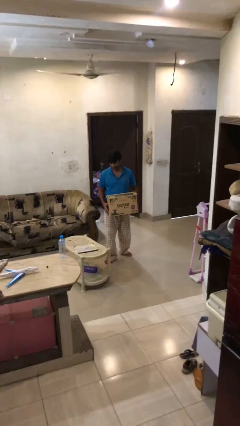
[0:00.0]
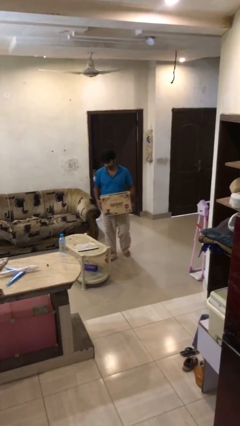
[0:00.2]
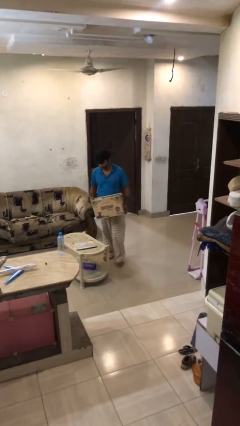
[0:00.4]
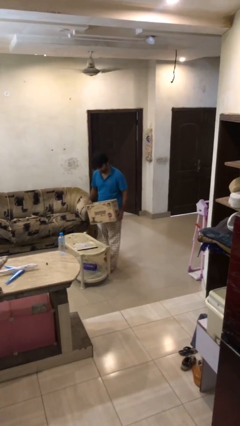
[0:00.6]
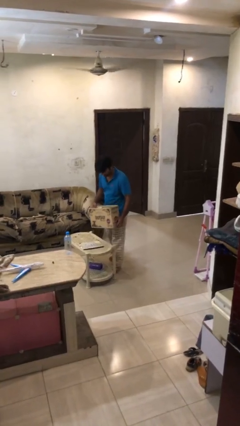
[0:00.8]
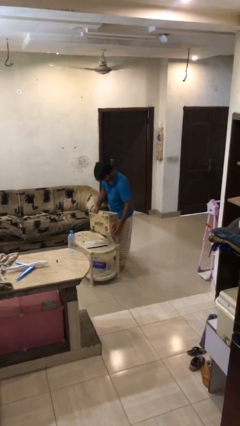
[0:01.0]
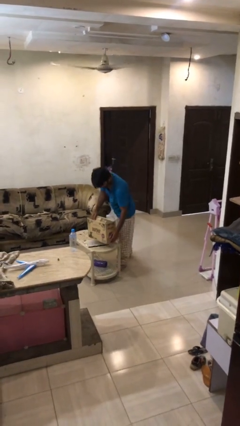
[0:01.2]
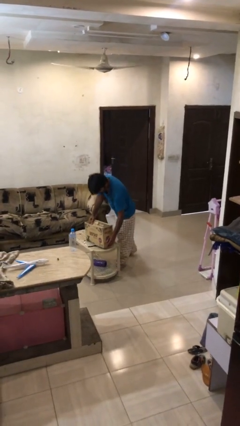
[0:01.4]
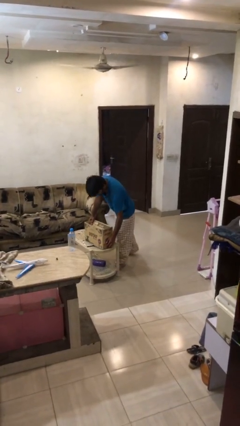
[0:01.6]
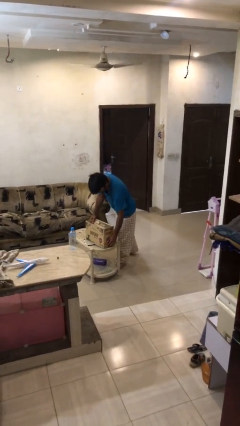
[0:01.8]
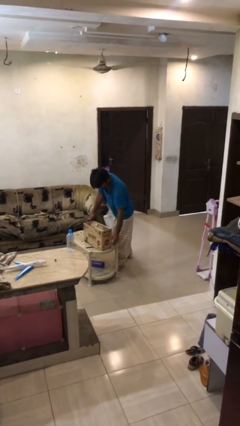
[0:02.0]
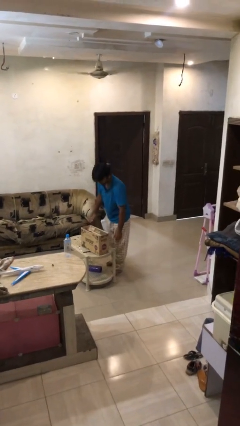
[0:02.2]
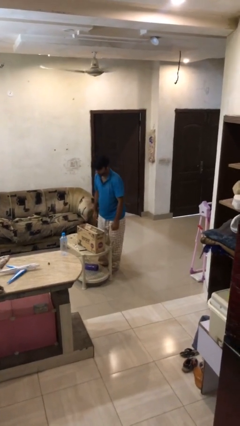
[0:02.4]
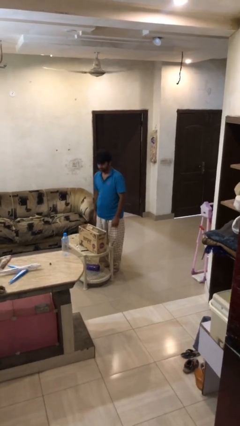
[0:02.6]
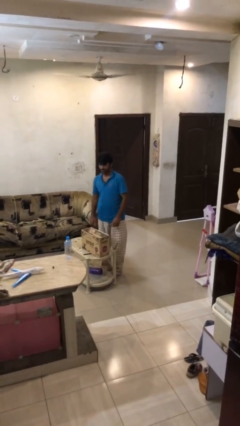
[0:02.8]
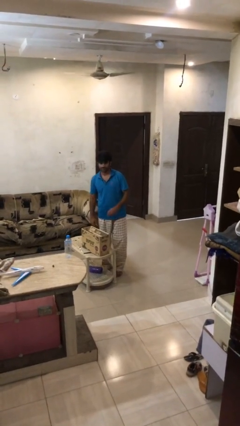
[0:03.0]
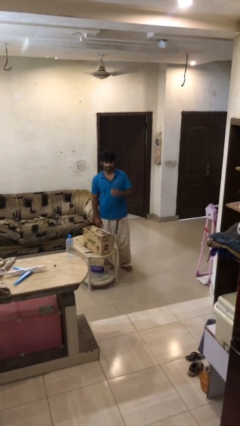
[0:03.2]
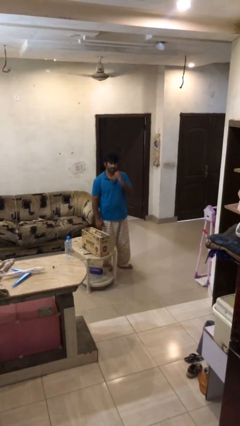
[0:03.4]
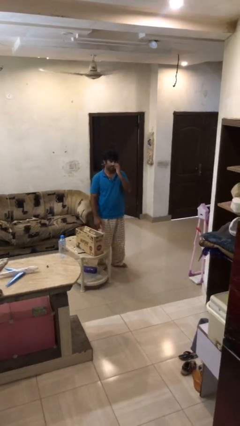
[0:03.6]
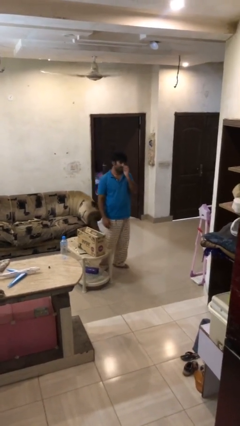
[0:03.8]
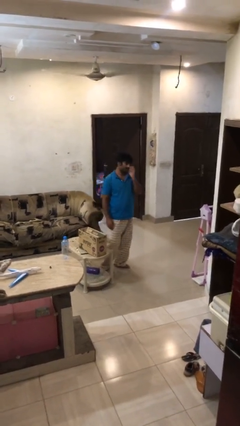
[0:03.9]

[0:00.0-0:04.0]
person puts down object on table

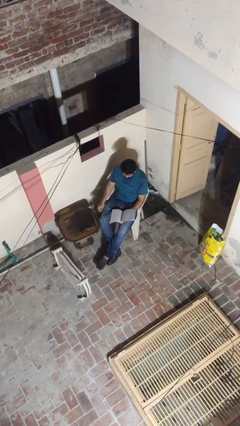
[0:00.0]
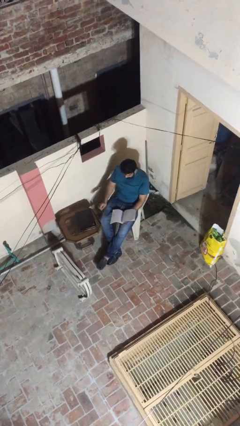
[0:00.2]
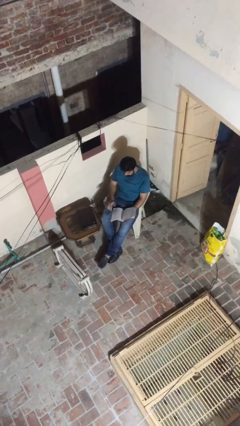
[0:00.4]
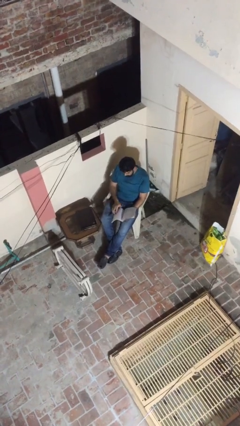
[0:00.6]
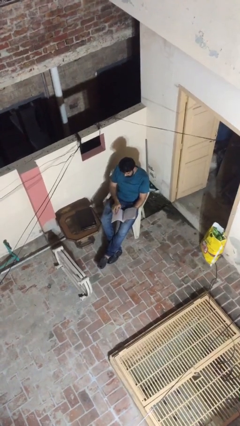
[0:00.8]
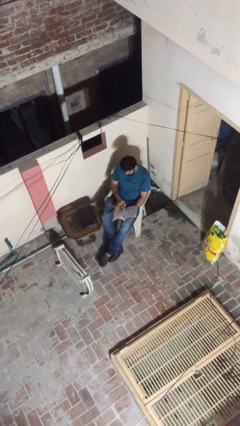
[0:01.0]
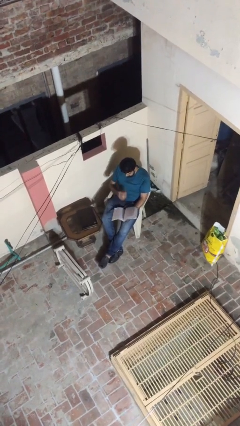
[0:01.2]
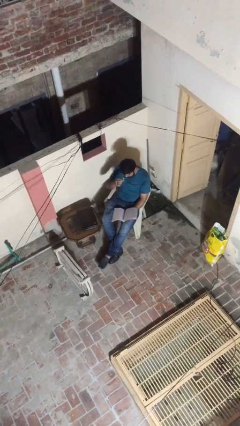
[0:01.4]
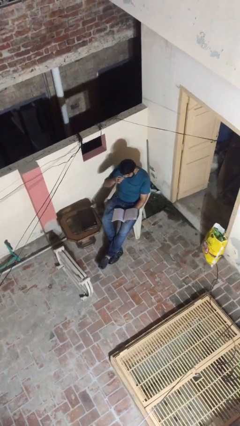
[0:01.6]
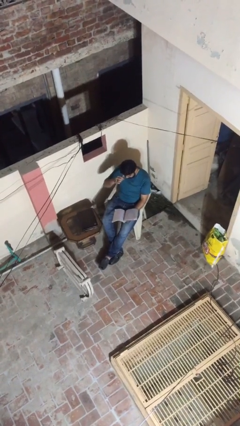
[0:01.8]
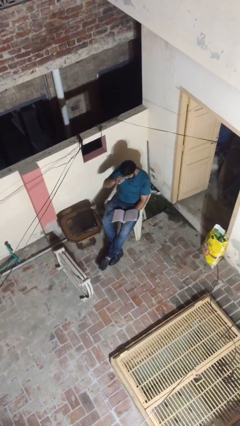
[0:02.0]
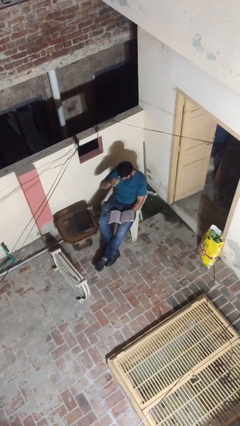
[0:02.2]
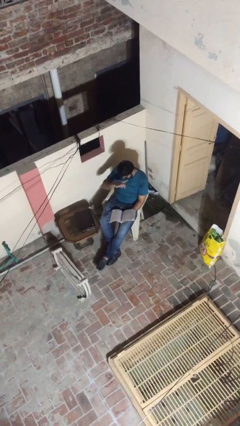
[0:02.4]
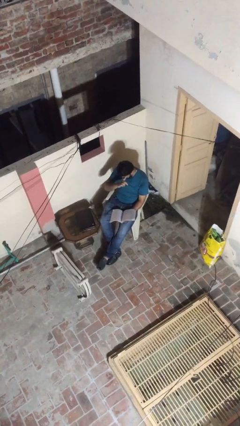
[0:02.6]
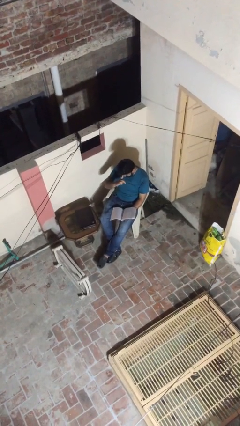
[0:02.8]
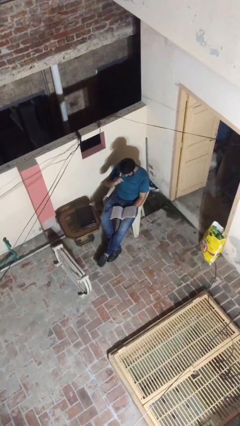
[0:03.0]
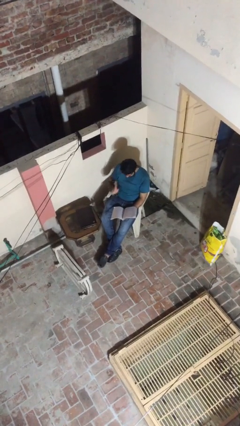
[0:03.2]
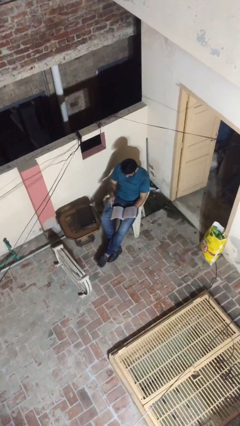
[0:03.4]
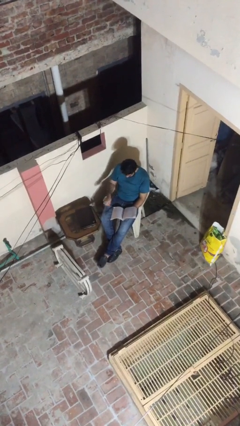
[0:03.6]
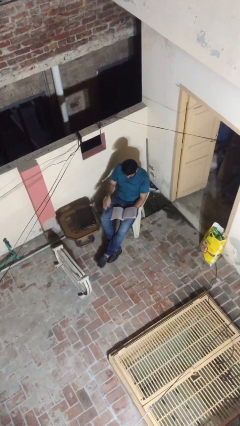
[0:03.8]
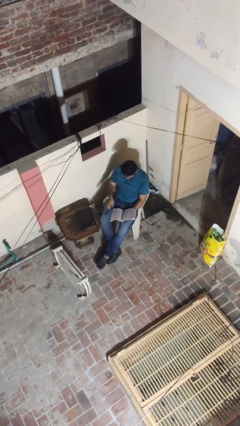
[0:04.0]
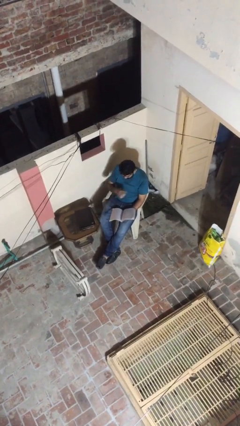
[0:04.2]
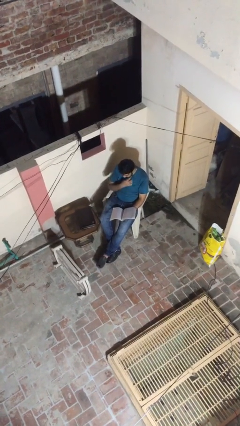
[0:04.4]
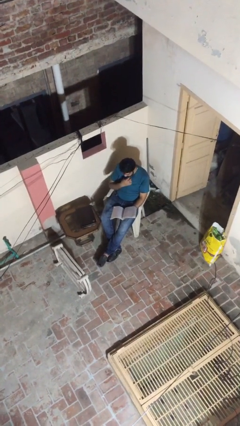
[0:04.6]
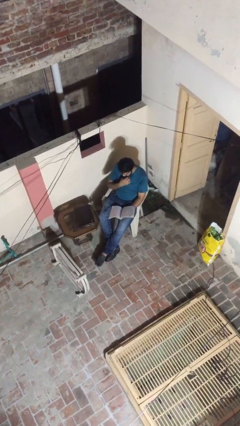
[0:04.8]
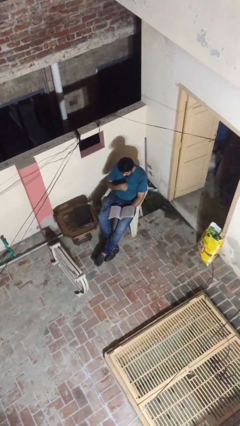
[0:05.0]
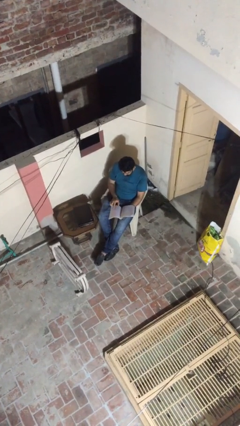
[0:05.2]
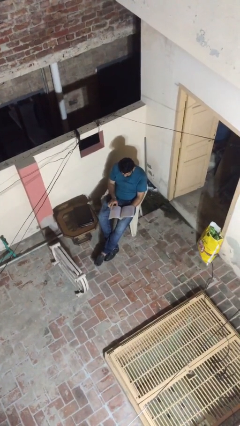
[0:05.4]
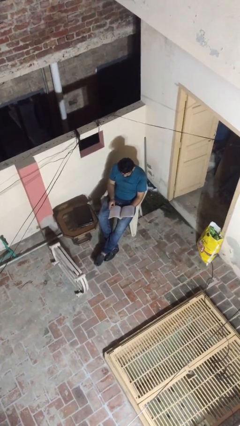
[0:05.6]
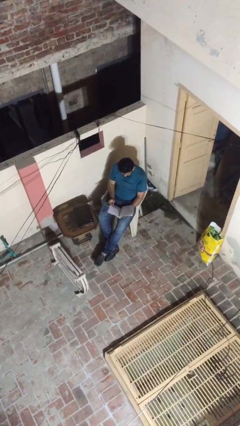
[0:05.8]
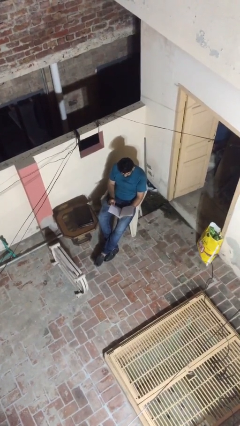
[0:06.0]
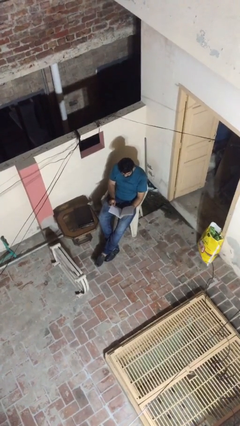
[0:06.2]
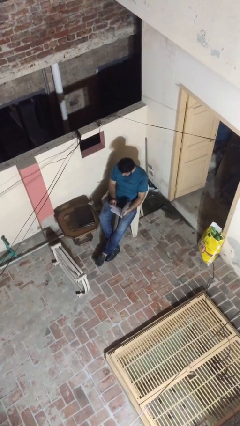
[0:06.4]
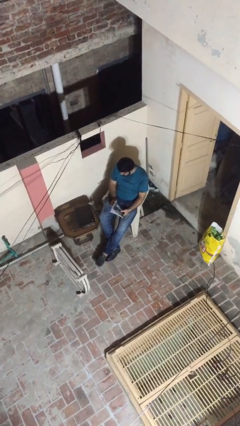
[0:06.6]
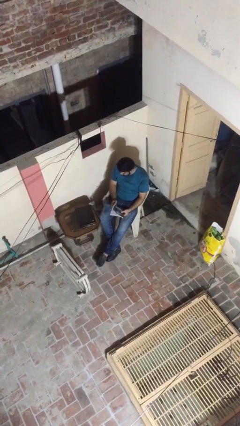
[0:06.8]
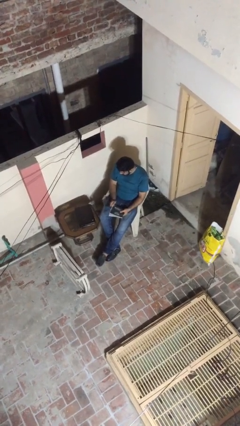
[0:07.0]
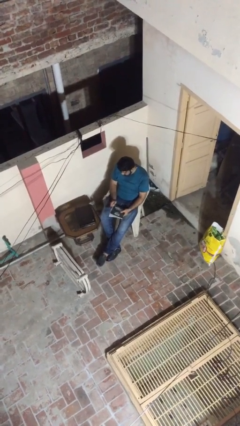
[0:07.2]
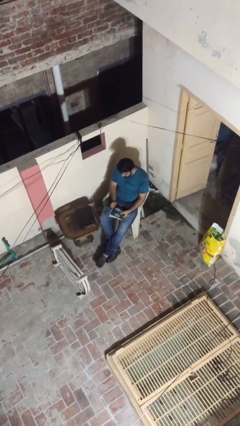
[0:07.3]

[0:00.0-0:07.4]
person reads document

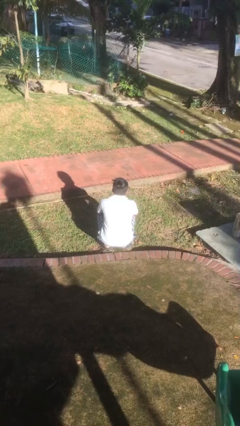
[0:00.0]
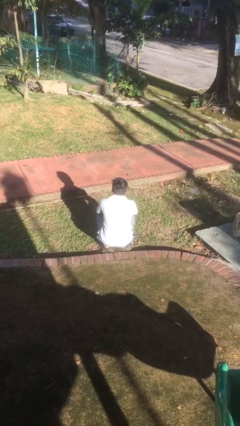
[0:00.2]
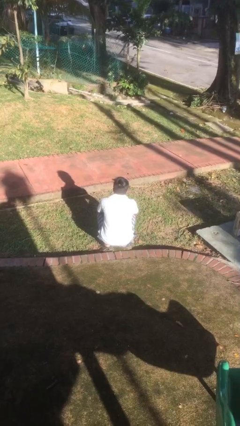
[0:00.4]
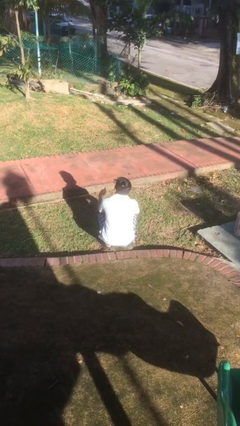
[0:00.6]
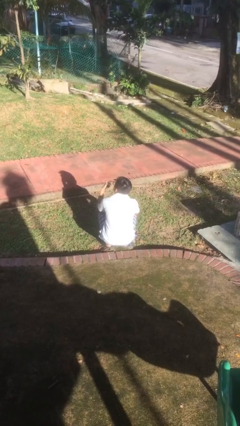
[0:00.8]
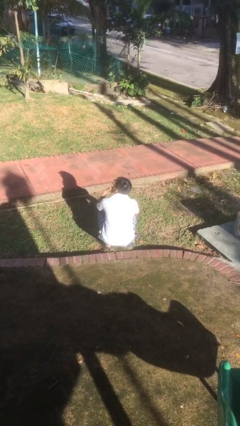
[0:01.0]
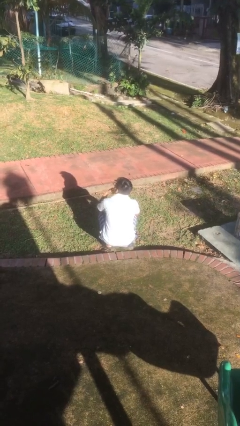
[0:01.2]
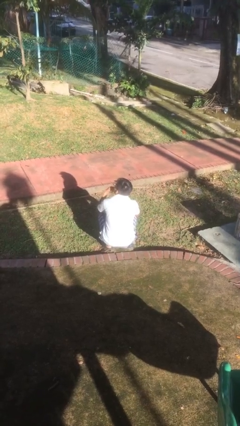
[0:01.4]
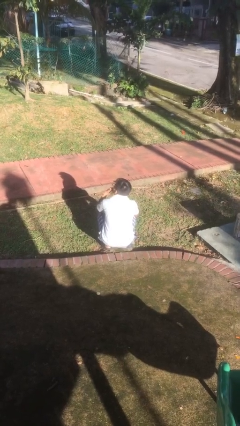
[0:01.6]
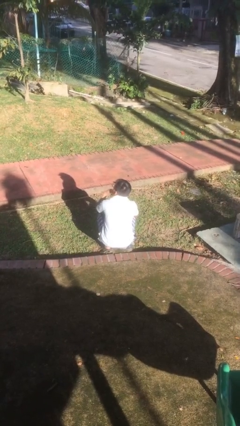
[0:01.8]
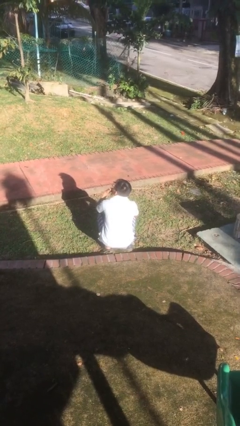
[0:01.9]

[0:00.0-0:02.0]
person strokes chin

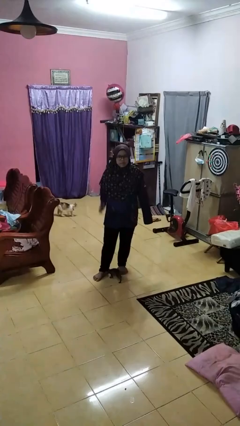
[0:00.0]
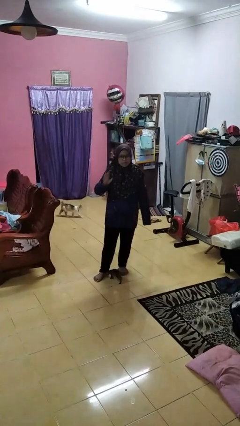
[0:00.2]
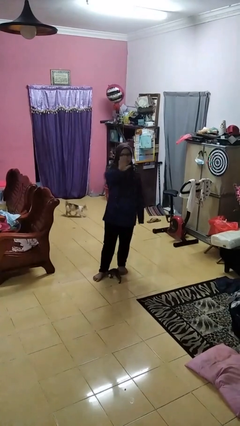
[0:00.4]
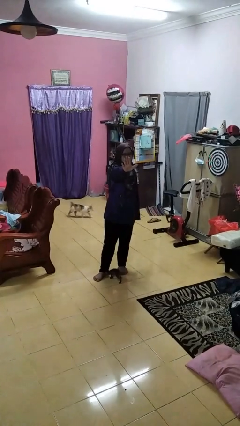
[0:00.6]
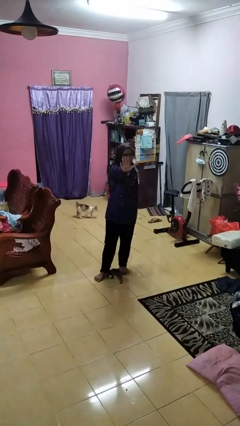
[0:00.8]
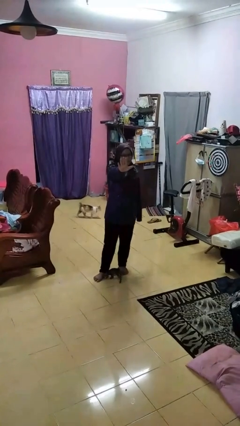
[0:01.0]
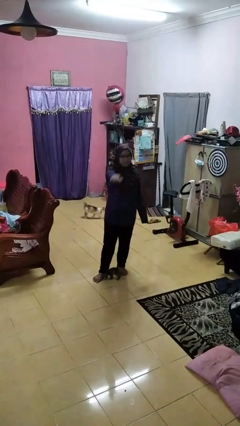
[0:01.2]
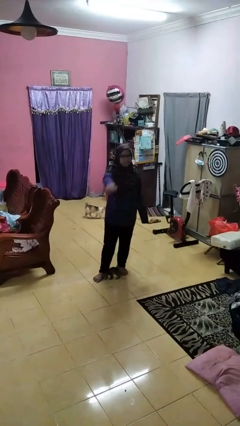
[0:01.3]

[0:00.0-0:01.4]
person gestures stop

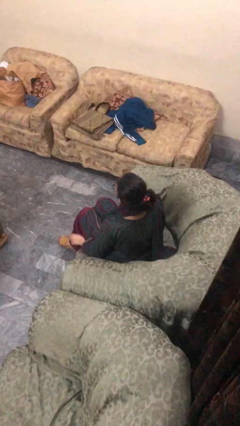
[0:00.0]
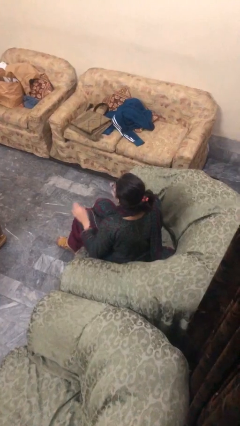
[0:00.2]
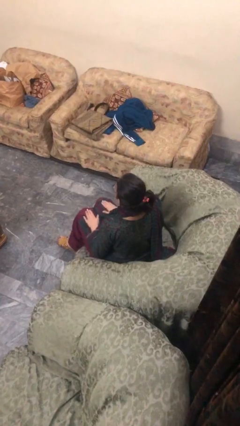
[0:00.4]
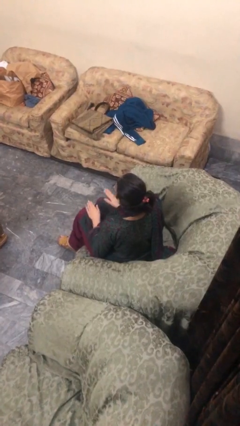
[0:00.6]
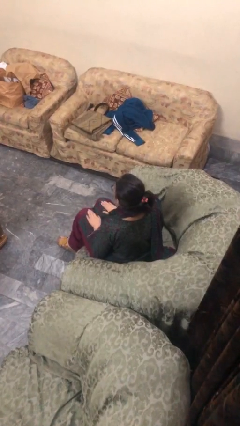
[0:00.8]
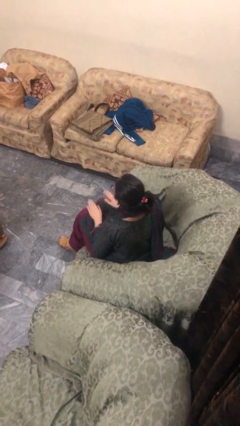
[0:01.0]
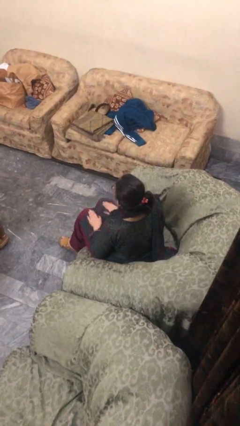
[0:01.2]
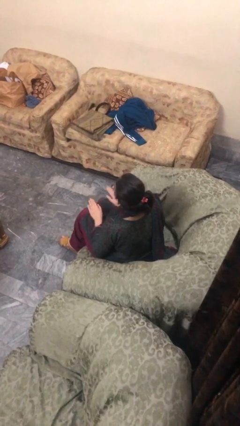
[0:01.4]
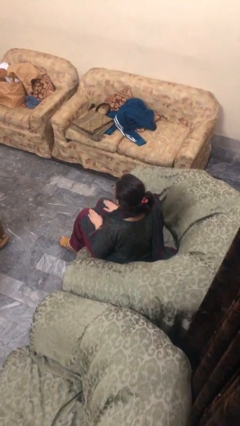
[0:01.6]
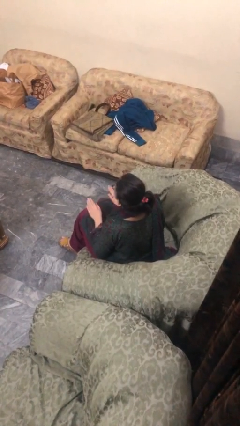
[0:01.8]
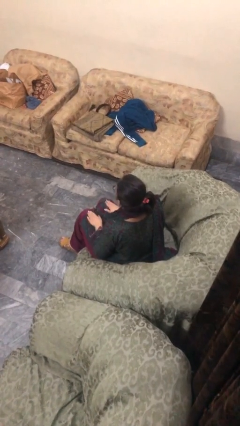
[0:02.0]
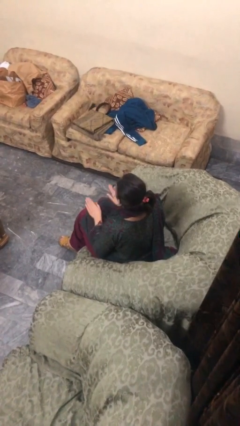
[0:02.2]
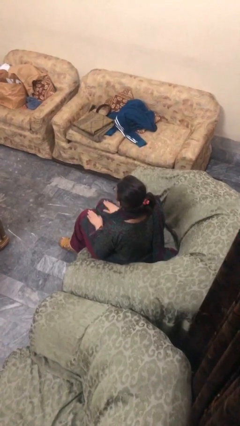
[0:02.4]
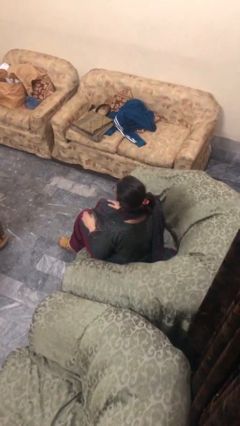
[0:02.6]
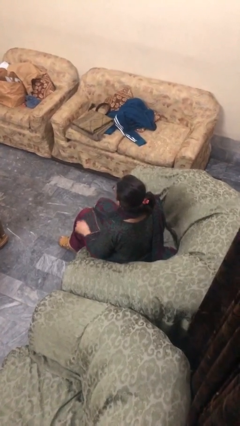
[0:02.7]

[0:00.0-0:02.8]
person slaps hands on thighs
